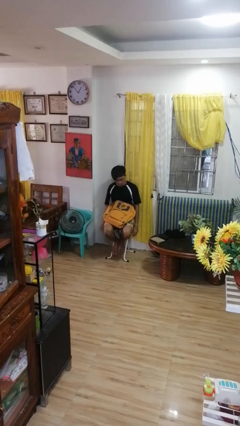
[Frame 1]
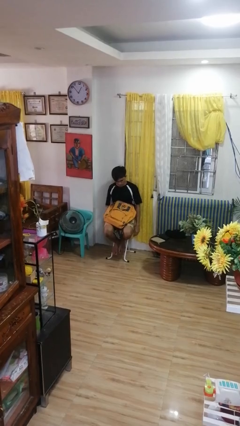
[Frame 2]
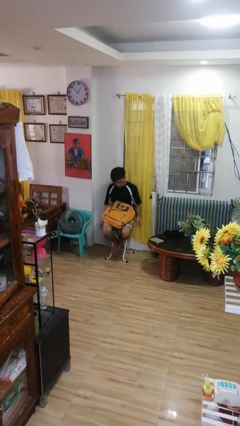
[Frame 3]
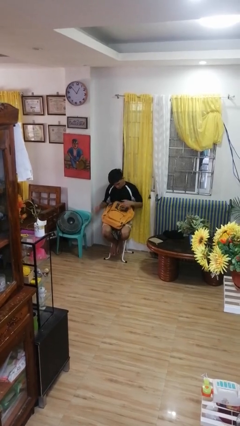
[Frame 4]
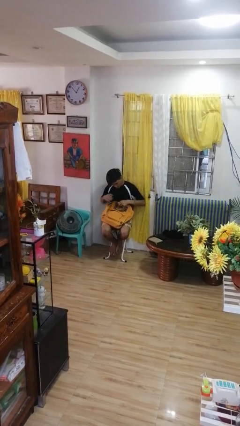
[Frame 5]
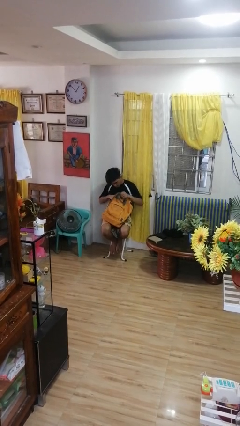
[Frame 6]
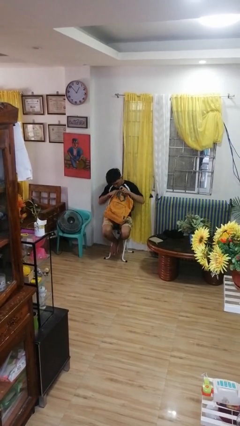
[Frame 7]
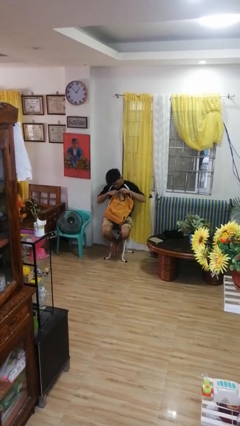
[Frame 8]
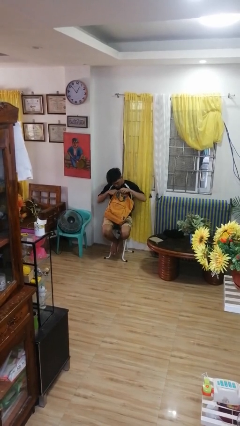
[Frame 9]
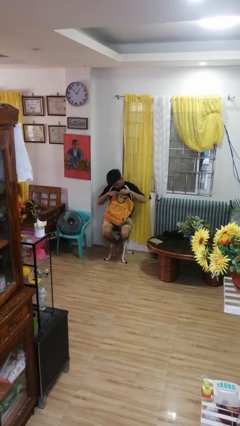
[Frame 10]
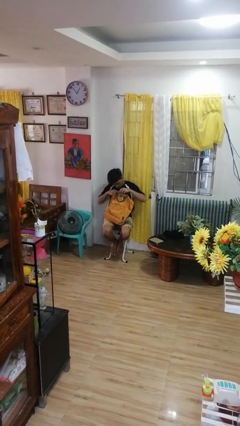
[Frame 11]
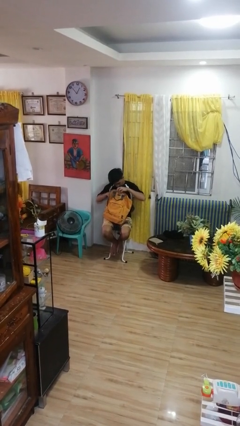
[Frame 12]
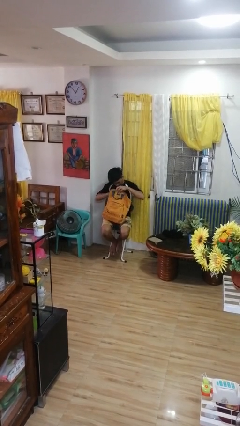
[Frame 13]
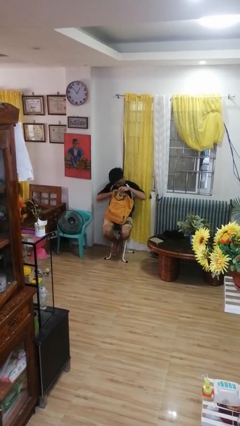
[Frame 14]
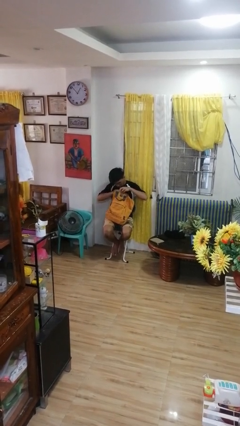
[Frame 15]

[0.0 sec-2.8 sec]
person searches in backpack

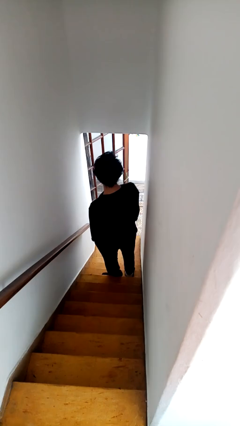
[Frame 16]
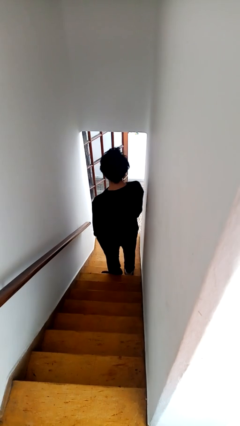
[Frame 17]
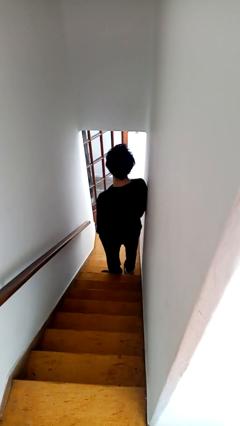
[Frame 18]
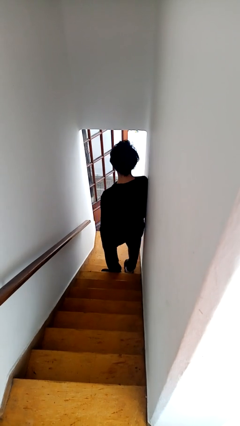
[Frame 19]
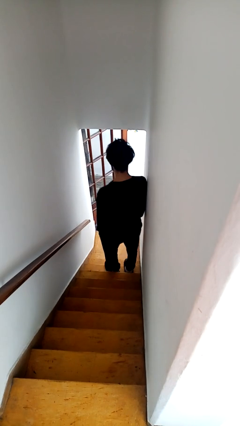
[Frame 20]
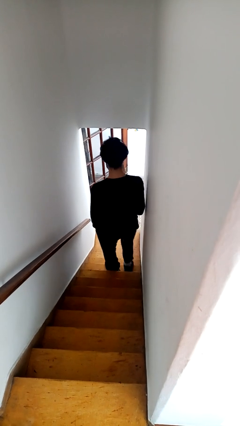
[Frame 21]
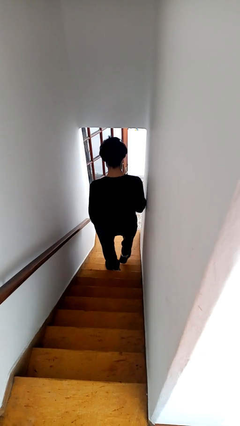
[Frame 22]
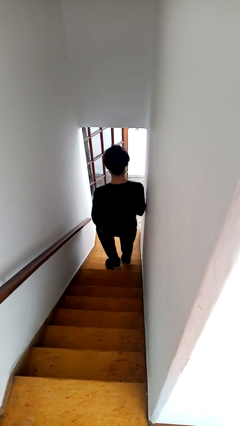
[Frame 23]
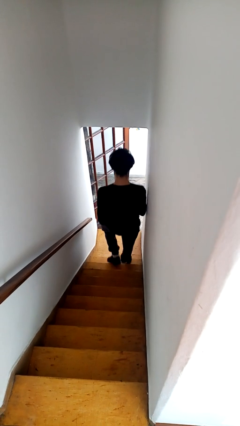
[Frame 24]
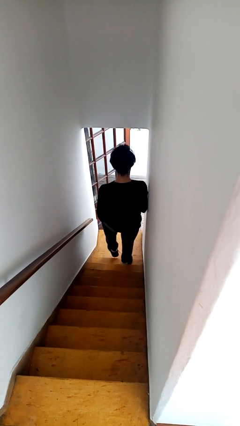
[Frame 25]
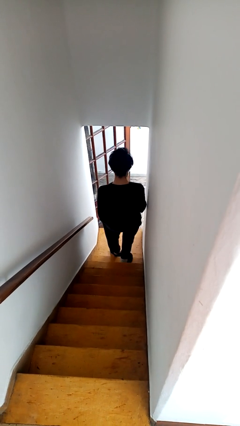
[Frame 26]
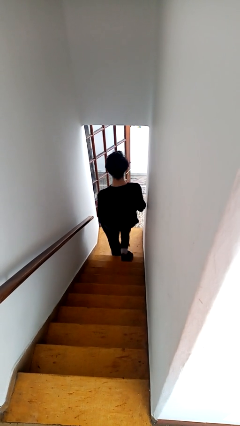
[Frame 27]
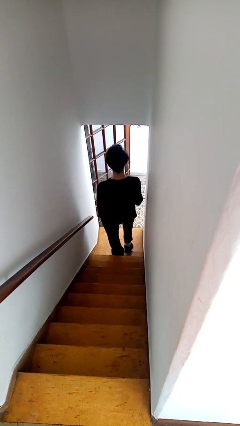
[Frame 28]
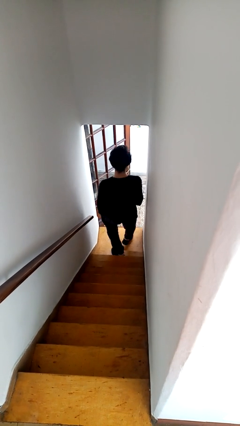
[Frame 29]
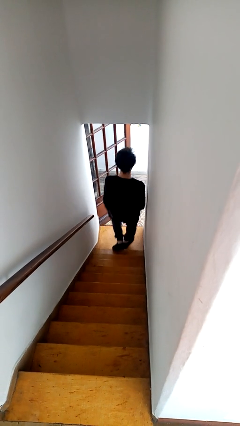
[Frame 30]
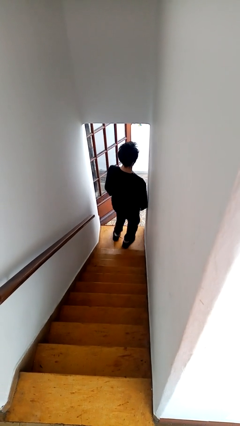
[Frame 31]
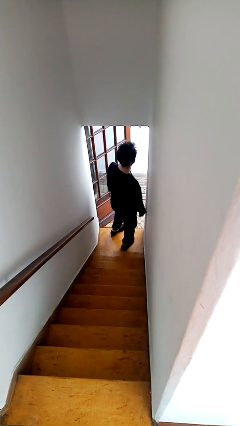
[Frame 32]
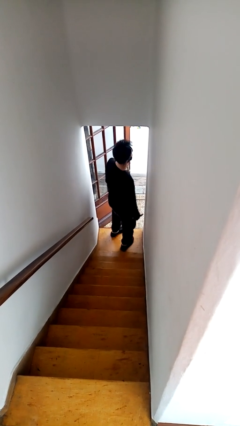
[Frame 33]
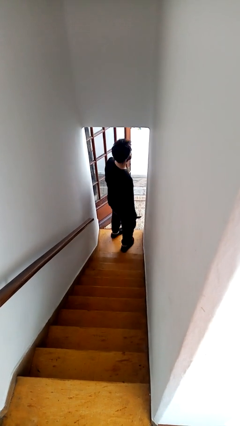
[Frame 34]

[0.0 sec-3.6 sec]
person climbs down stairs

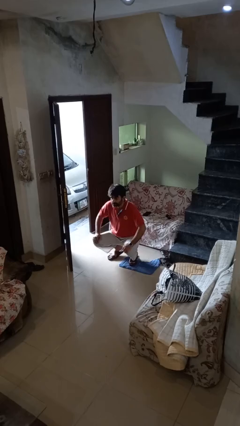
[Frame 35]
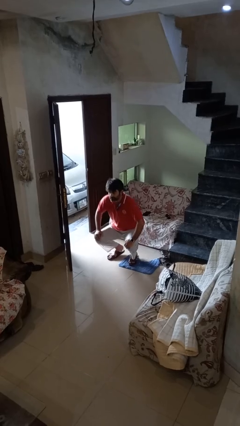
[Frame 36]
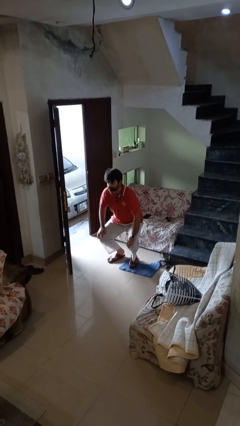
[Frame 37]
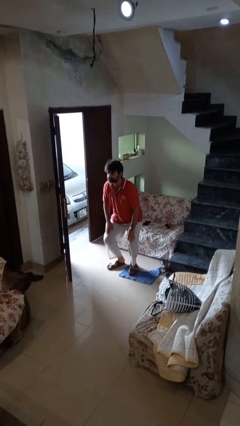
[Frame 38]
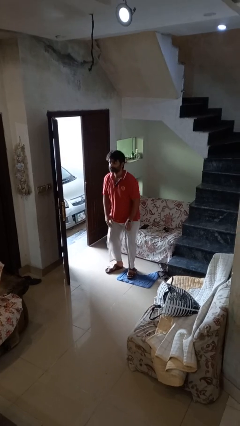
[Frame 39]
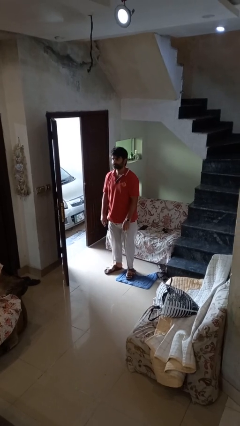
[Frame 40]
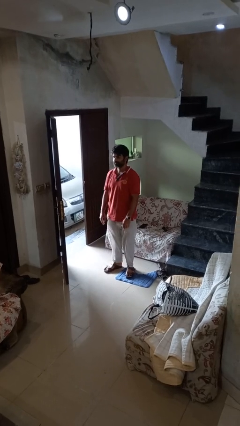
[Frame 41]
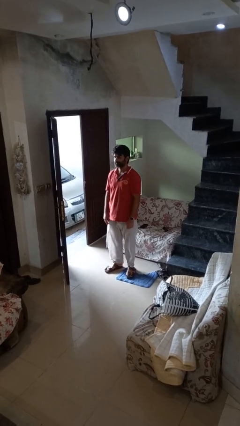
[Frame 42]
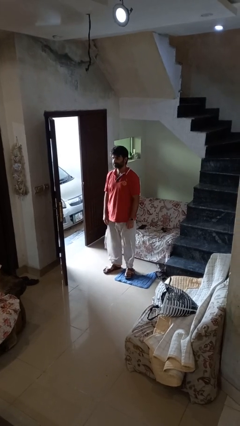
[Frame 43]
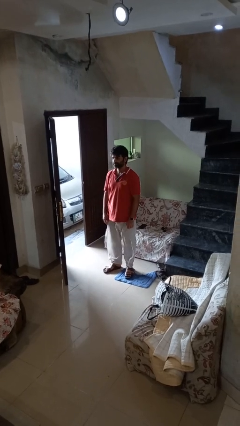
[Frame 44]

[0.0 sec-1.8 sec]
person stands up

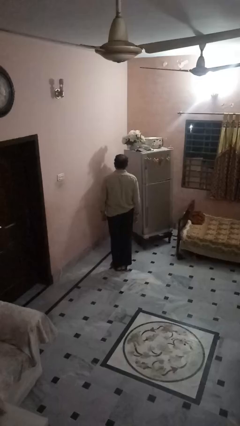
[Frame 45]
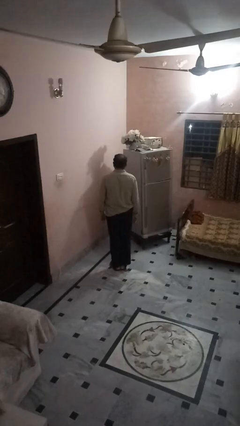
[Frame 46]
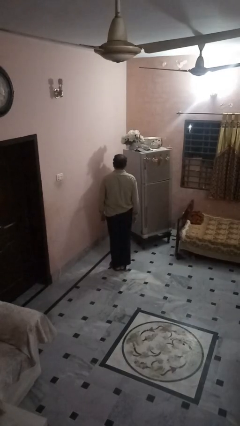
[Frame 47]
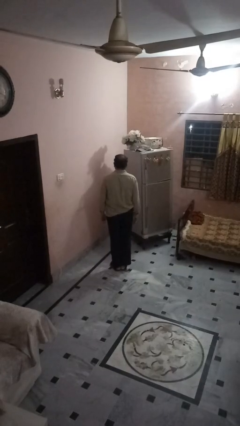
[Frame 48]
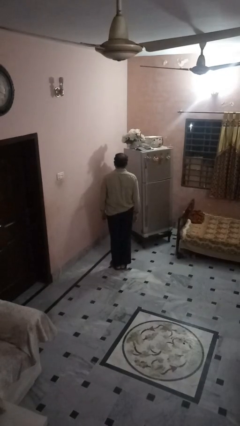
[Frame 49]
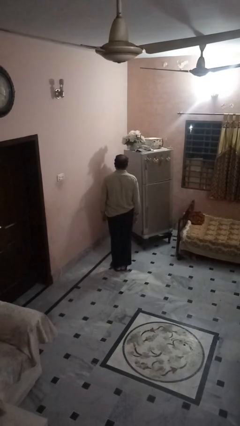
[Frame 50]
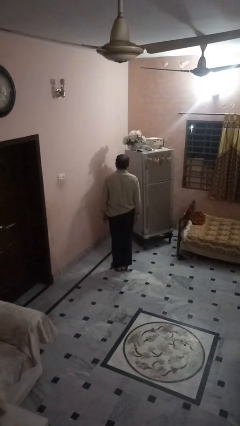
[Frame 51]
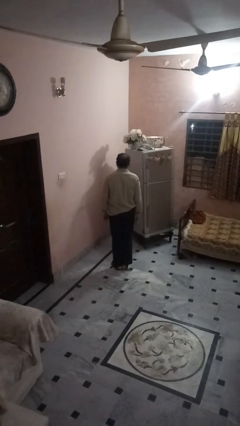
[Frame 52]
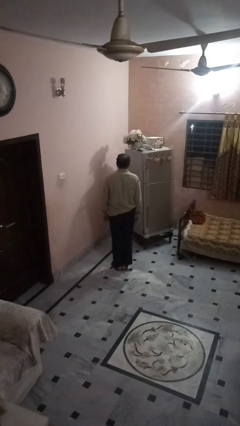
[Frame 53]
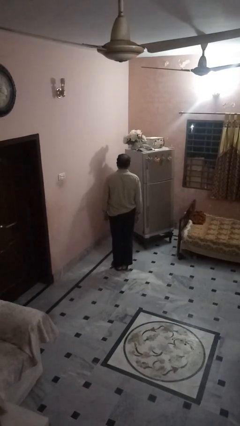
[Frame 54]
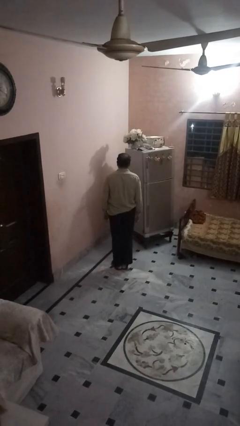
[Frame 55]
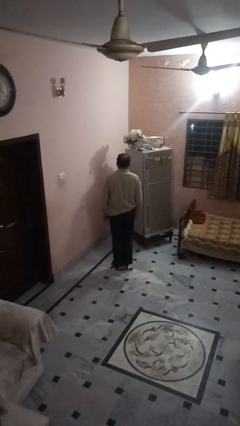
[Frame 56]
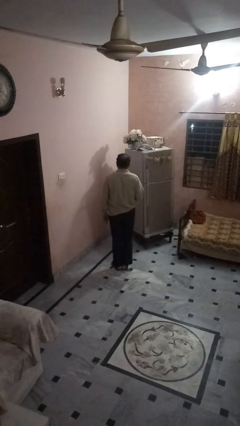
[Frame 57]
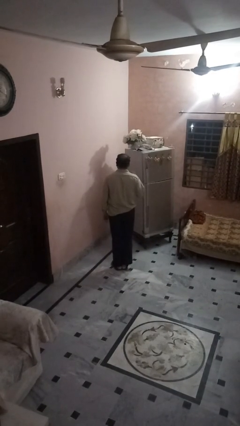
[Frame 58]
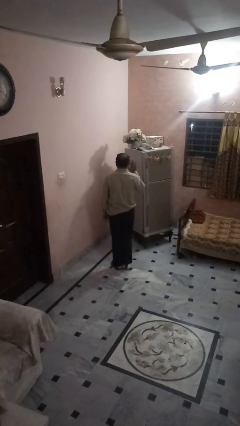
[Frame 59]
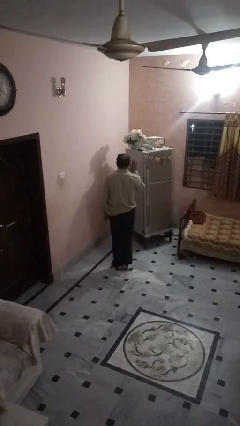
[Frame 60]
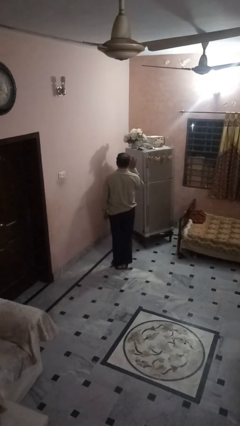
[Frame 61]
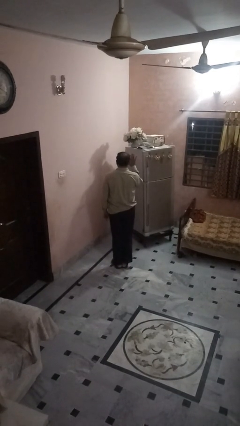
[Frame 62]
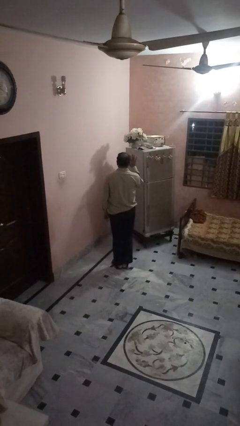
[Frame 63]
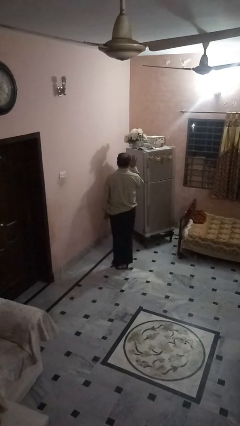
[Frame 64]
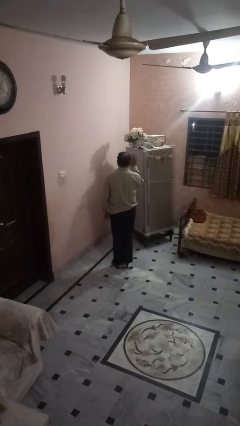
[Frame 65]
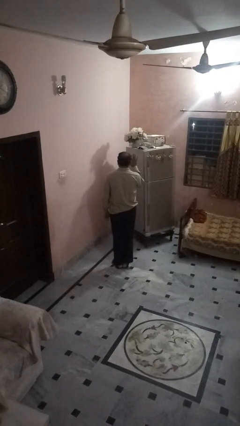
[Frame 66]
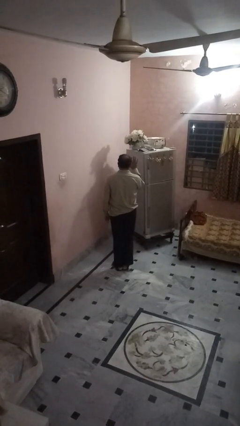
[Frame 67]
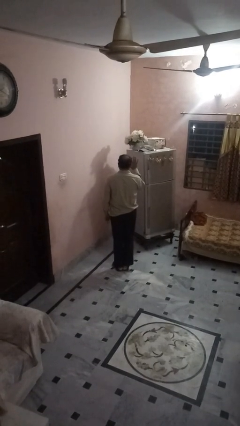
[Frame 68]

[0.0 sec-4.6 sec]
person gestures number five

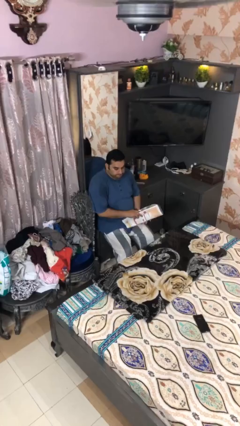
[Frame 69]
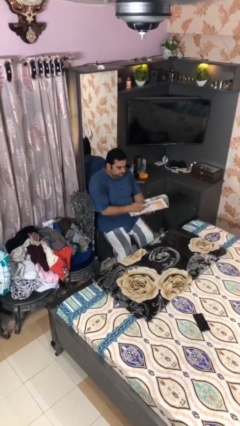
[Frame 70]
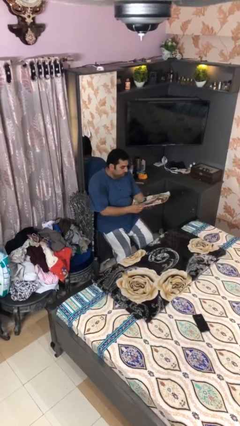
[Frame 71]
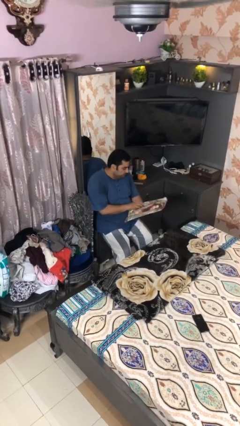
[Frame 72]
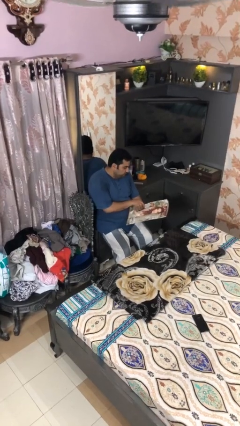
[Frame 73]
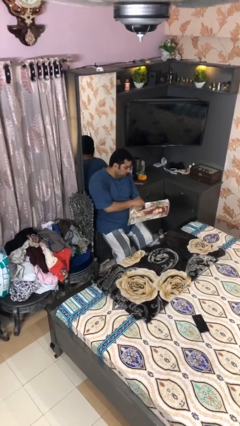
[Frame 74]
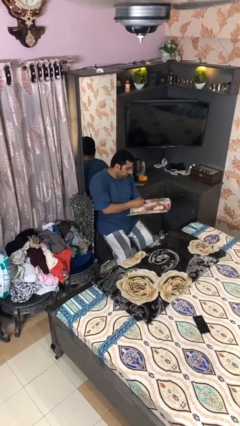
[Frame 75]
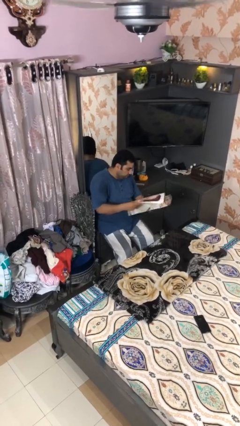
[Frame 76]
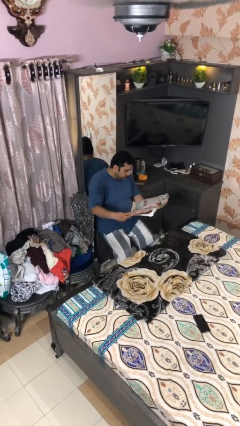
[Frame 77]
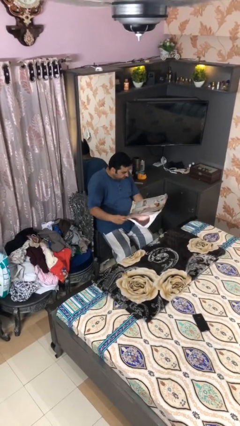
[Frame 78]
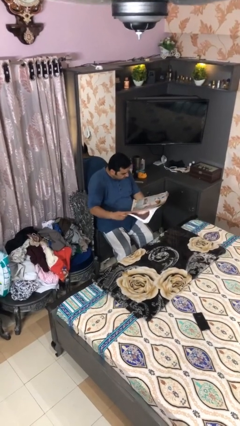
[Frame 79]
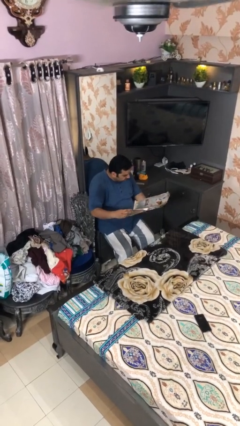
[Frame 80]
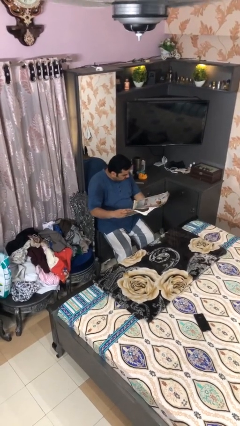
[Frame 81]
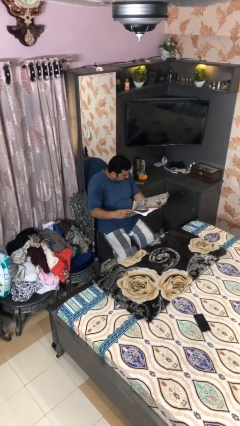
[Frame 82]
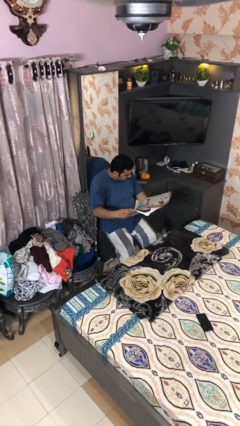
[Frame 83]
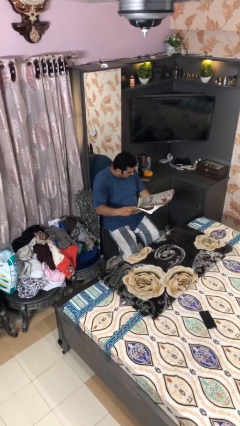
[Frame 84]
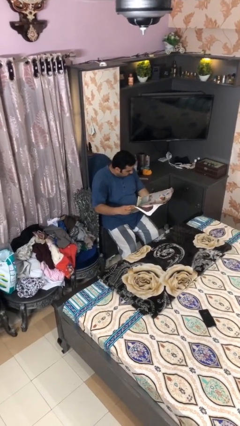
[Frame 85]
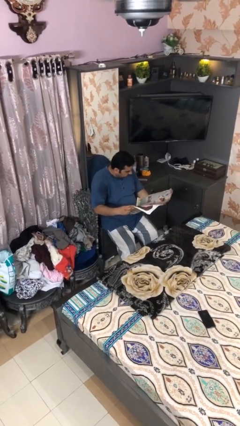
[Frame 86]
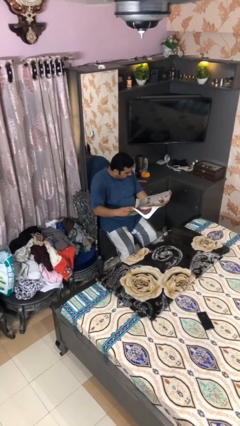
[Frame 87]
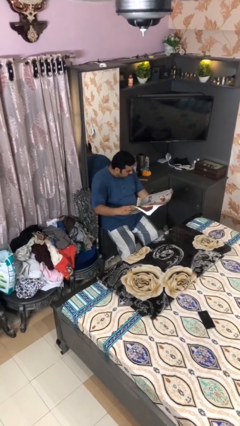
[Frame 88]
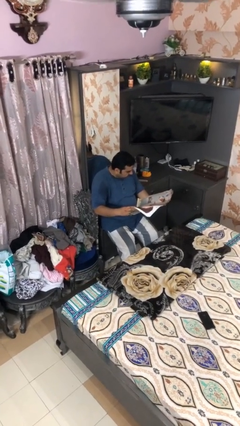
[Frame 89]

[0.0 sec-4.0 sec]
person reads magazine

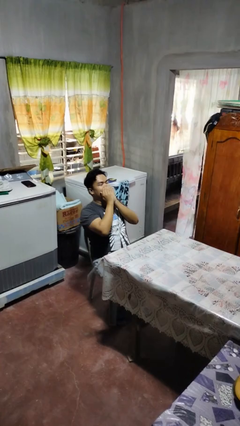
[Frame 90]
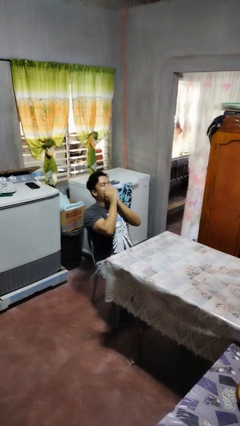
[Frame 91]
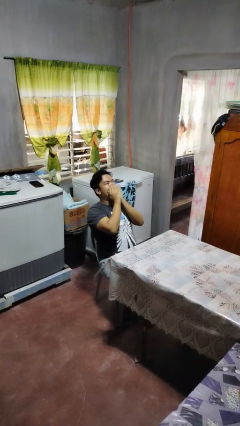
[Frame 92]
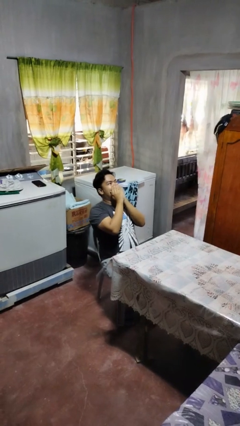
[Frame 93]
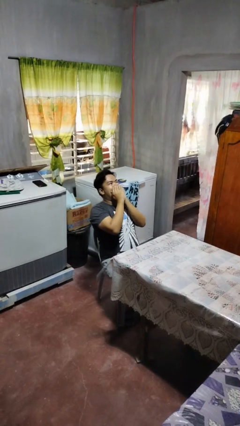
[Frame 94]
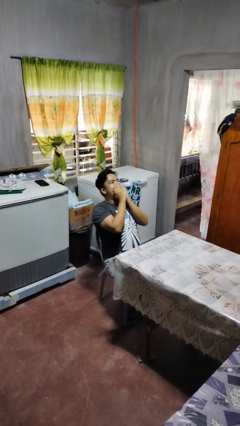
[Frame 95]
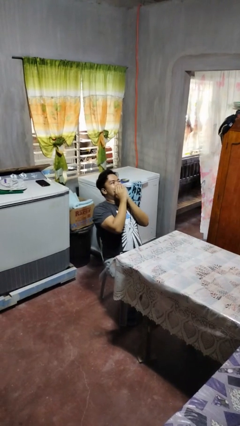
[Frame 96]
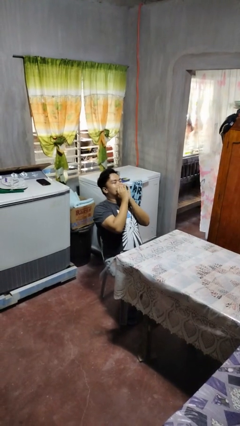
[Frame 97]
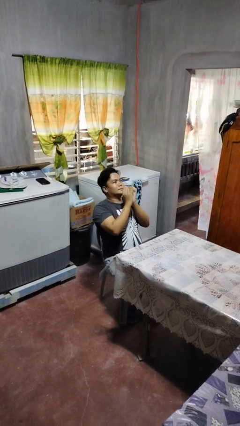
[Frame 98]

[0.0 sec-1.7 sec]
person yawns
